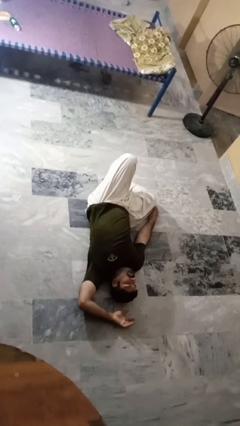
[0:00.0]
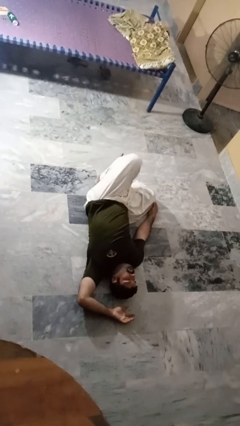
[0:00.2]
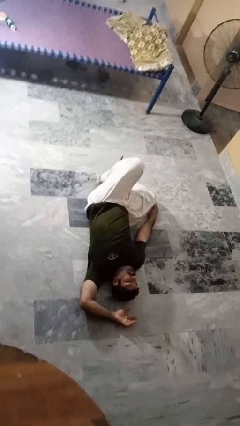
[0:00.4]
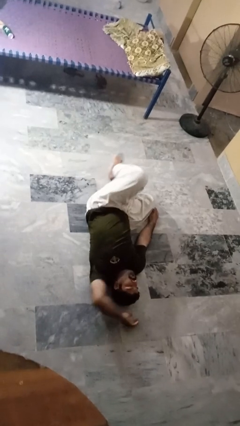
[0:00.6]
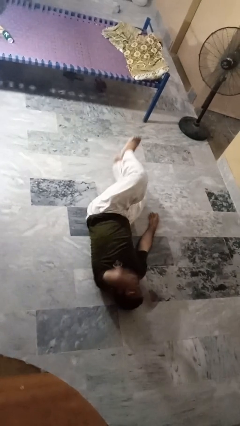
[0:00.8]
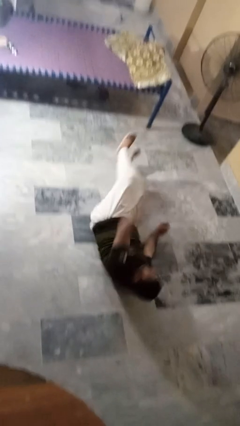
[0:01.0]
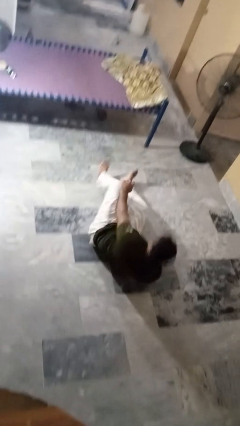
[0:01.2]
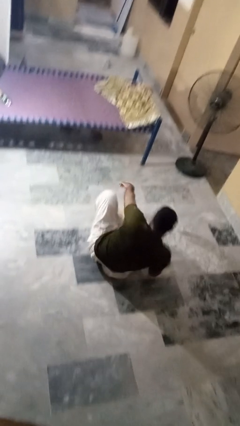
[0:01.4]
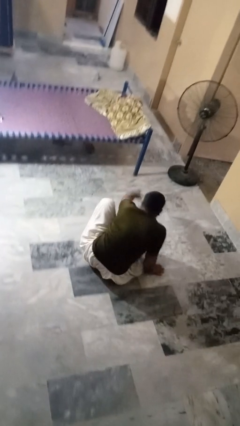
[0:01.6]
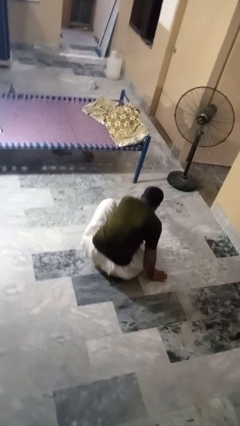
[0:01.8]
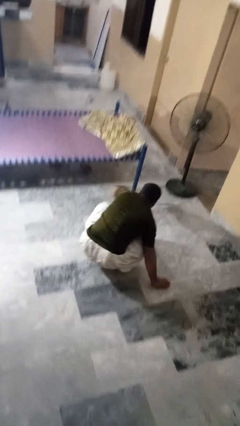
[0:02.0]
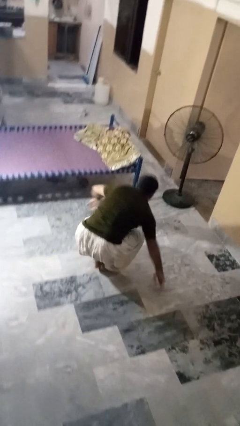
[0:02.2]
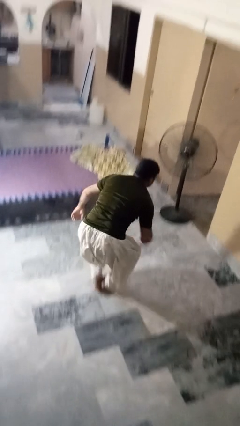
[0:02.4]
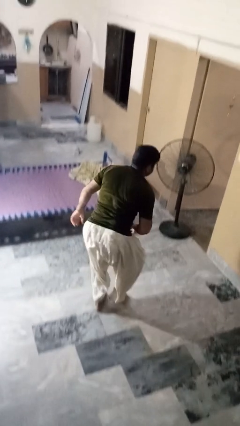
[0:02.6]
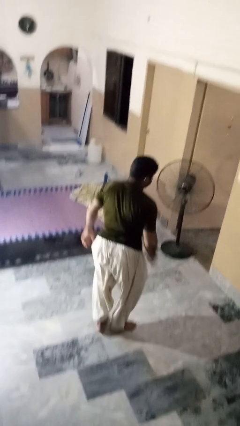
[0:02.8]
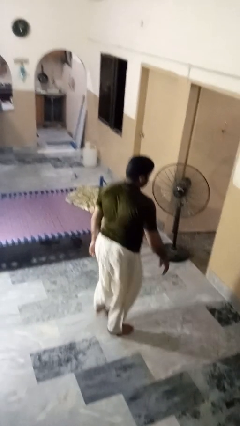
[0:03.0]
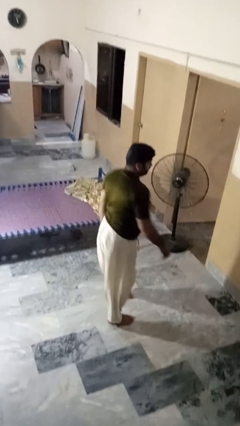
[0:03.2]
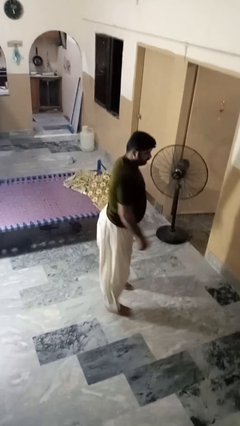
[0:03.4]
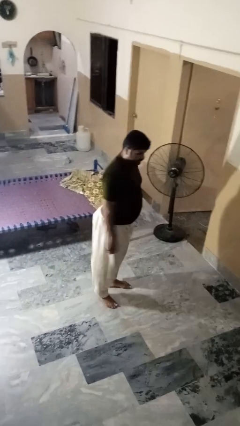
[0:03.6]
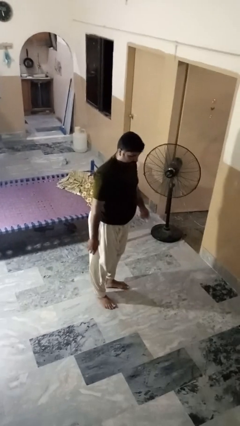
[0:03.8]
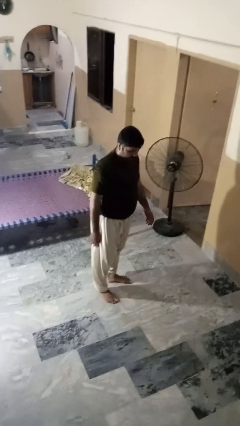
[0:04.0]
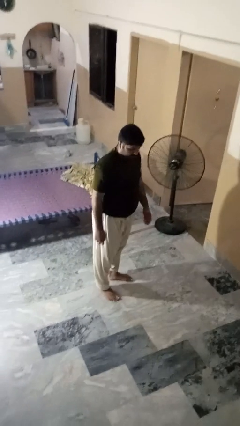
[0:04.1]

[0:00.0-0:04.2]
person stands up from floor

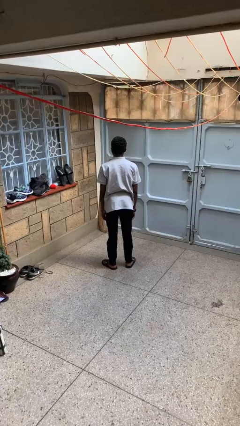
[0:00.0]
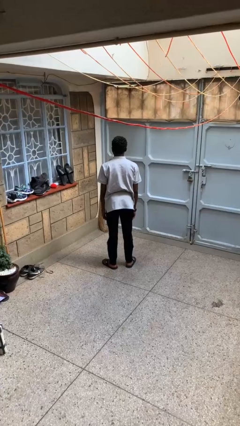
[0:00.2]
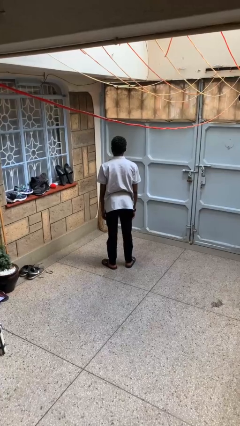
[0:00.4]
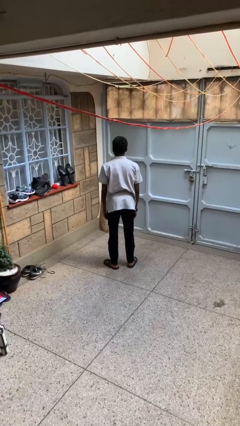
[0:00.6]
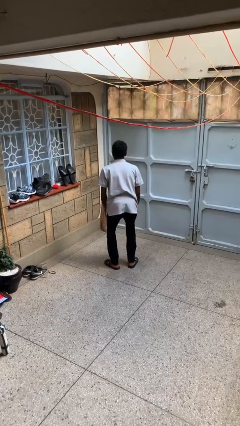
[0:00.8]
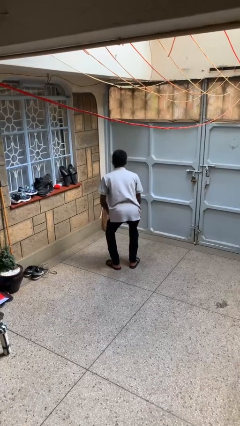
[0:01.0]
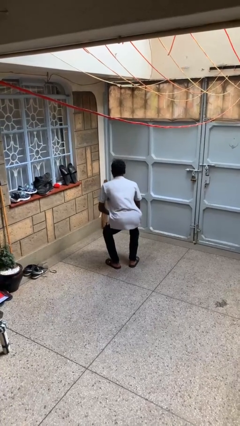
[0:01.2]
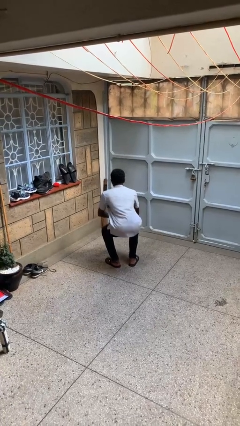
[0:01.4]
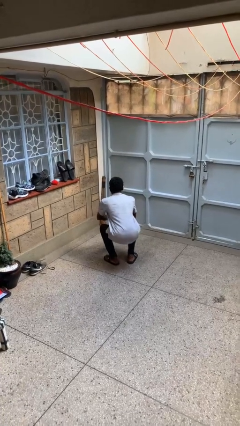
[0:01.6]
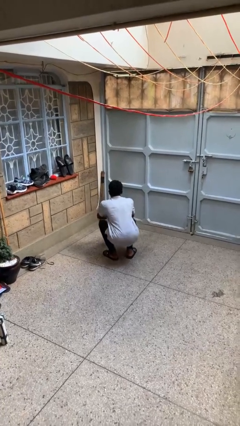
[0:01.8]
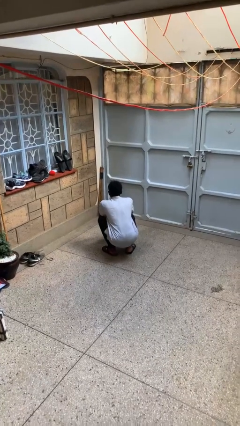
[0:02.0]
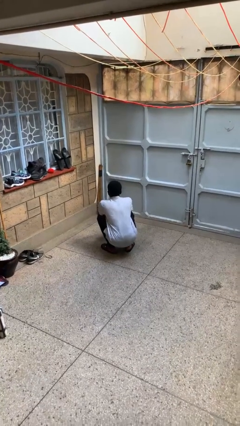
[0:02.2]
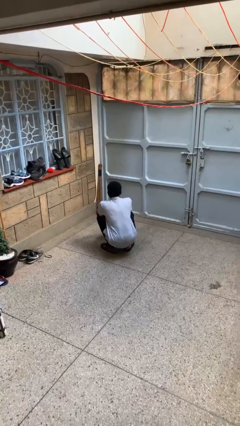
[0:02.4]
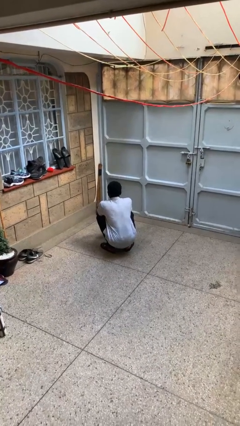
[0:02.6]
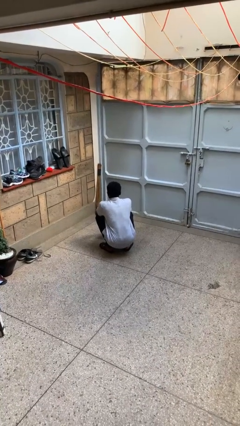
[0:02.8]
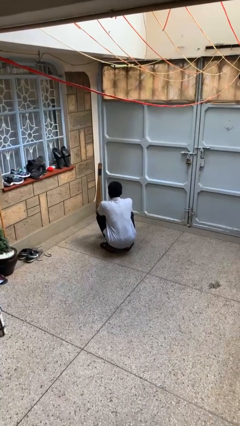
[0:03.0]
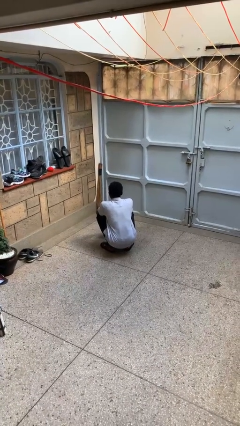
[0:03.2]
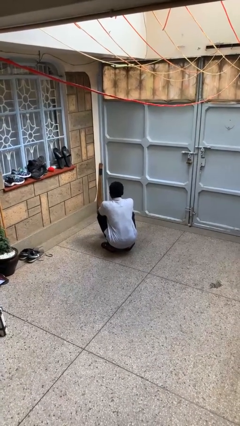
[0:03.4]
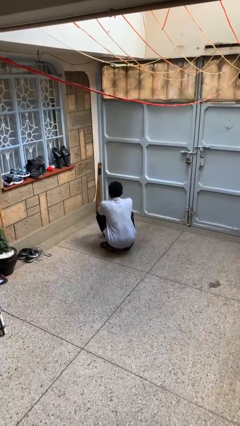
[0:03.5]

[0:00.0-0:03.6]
person squats

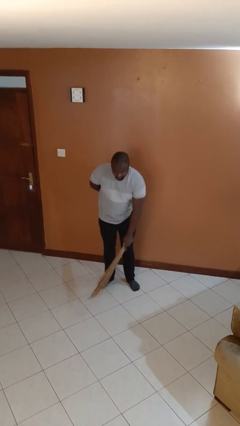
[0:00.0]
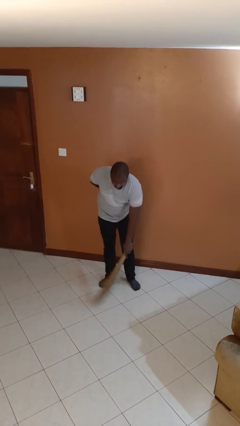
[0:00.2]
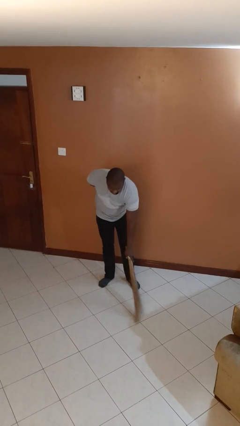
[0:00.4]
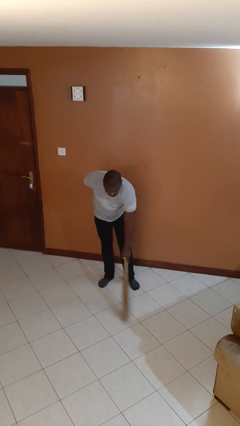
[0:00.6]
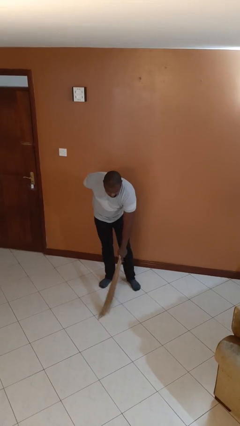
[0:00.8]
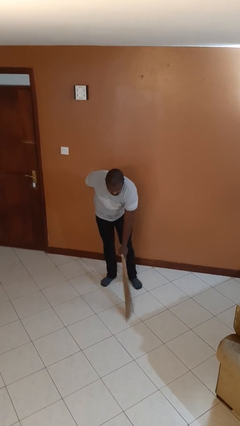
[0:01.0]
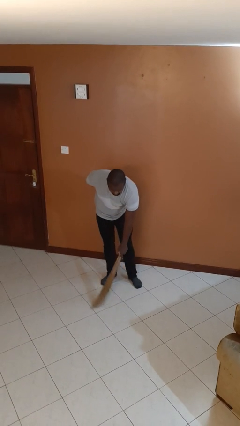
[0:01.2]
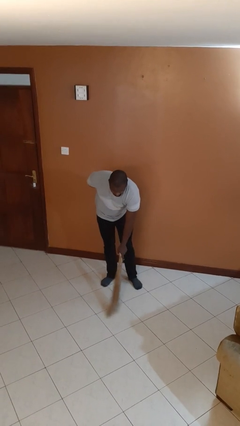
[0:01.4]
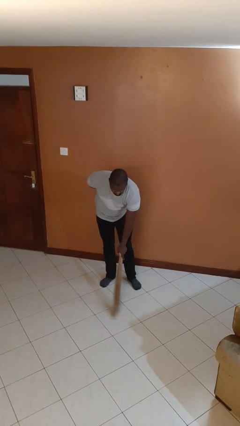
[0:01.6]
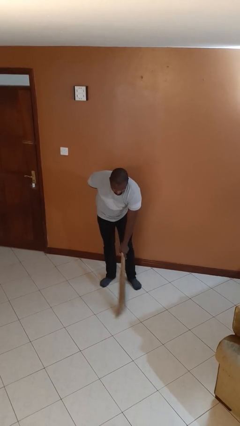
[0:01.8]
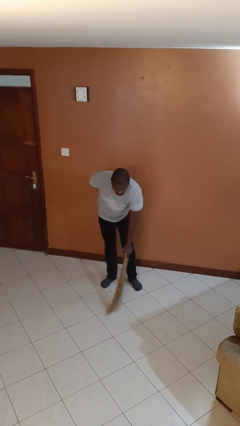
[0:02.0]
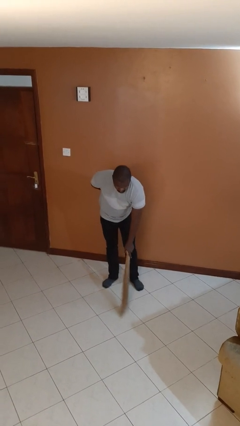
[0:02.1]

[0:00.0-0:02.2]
person sweeps floor

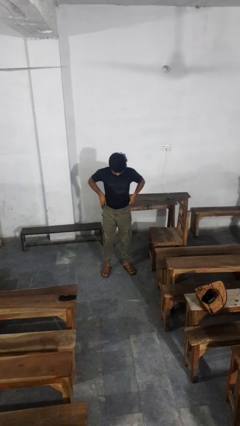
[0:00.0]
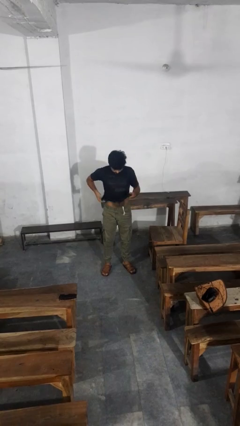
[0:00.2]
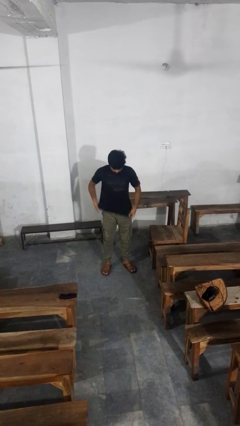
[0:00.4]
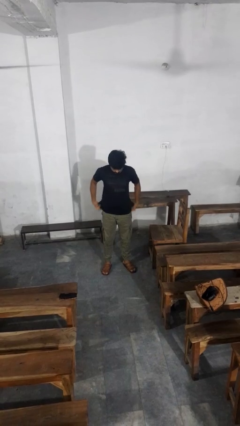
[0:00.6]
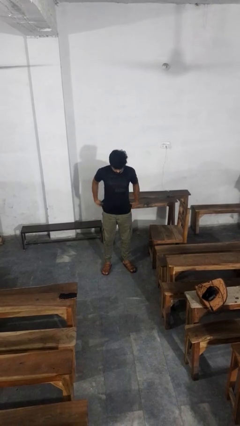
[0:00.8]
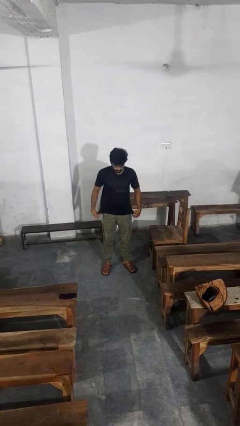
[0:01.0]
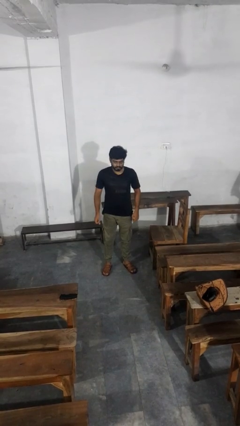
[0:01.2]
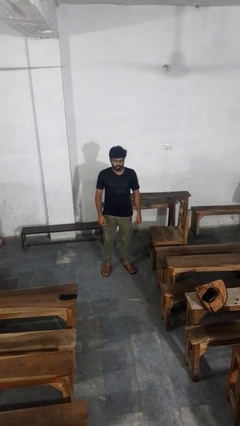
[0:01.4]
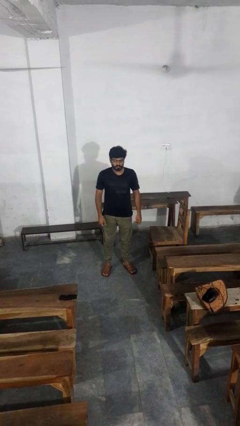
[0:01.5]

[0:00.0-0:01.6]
person untucks shirt

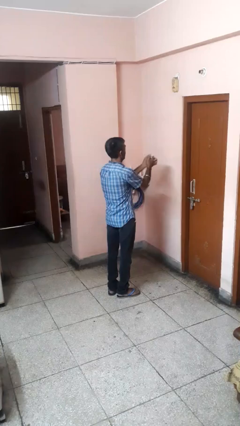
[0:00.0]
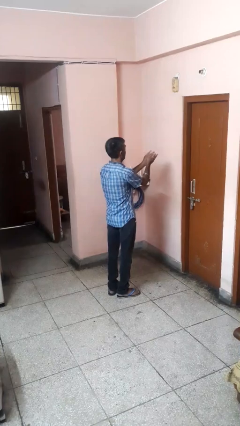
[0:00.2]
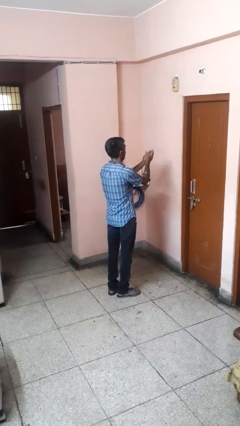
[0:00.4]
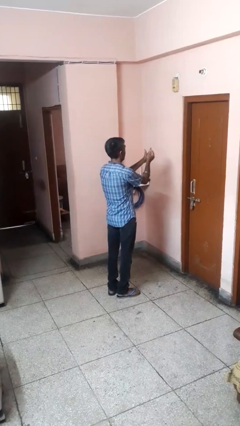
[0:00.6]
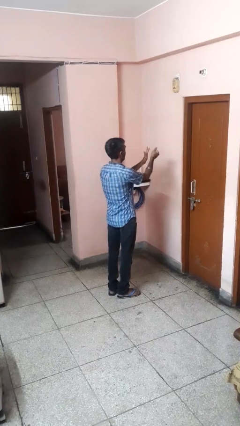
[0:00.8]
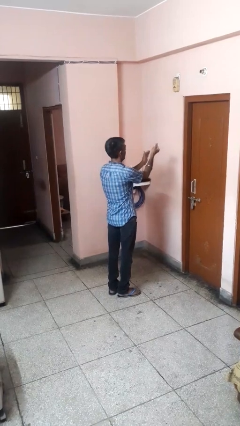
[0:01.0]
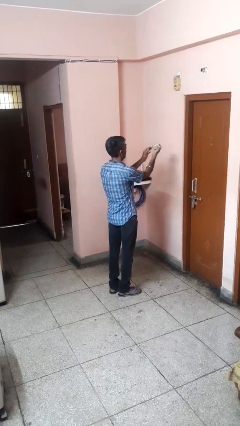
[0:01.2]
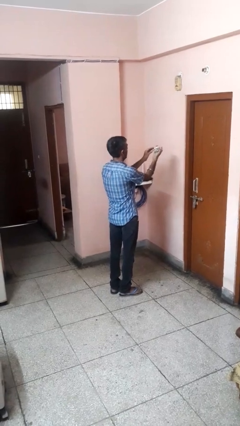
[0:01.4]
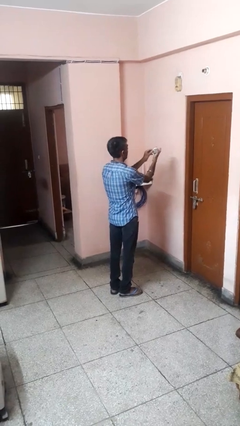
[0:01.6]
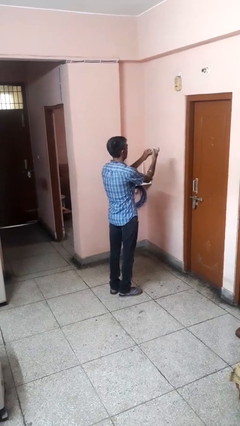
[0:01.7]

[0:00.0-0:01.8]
person crumples paper

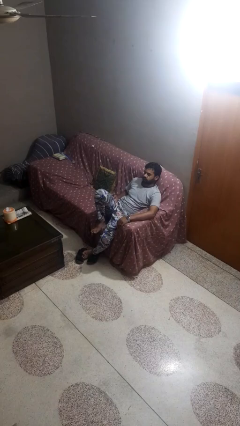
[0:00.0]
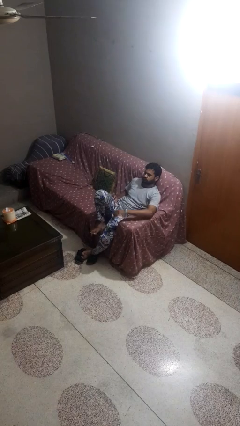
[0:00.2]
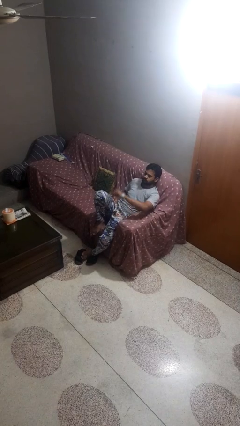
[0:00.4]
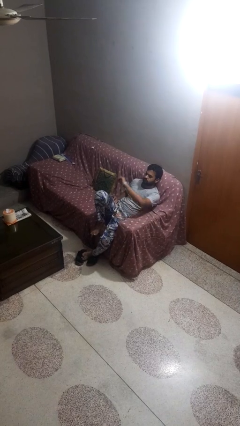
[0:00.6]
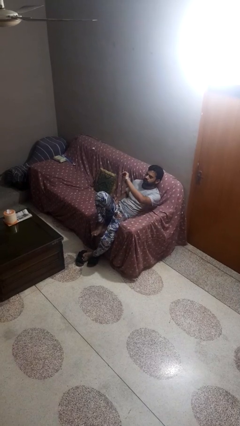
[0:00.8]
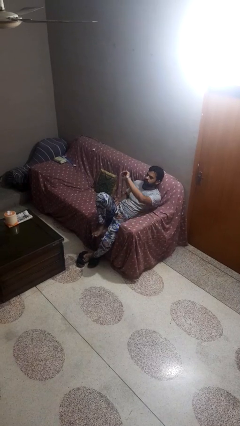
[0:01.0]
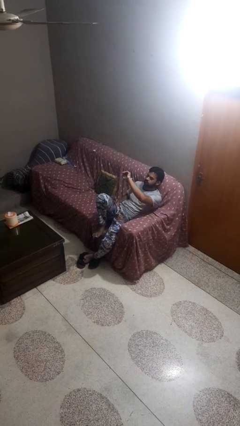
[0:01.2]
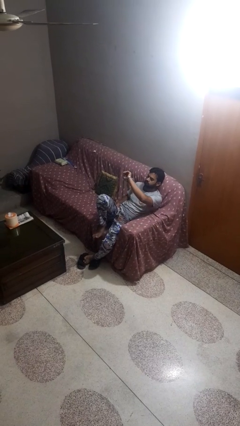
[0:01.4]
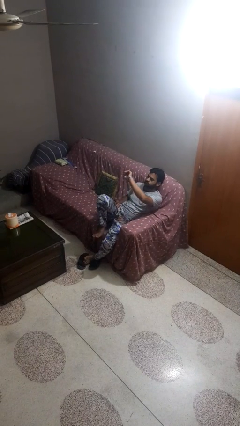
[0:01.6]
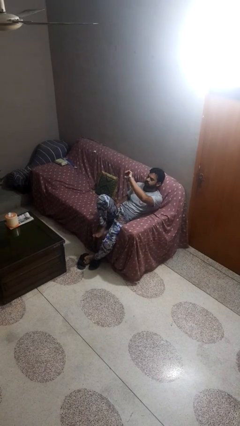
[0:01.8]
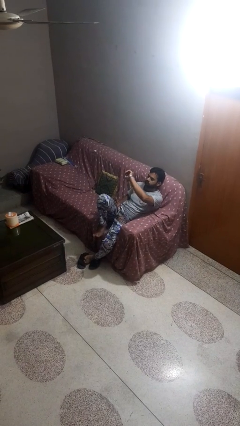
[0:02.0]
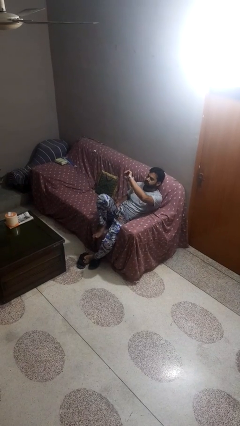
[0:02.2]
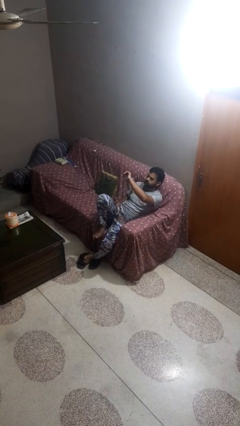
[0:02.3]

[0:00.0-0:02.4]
person looks at wristwatch

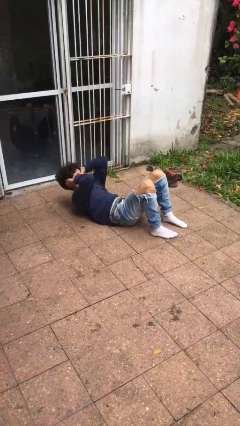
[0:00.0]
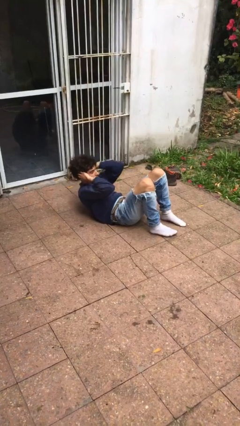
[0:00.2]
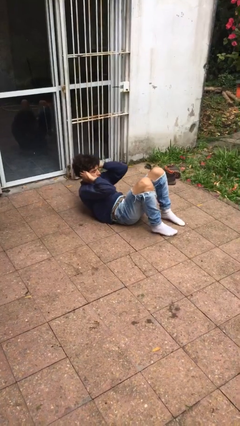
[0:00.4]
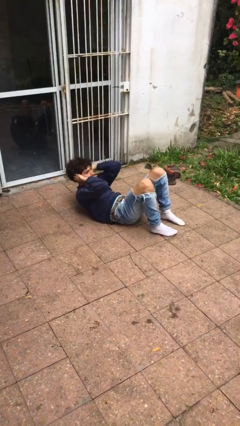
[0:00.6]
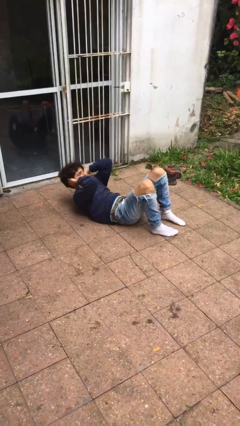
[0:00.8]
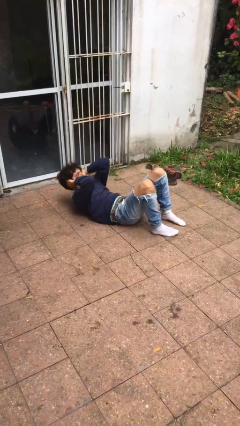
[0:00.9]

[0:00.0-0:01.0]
person exercises with situp
